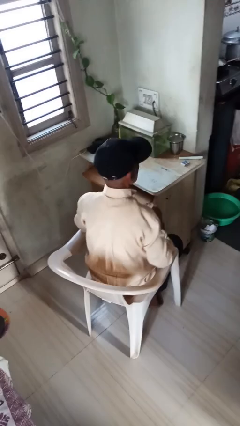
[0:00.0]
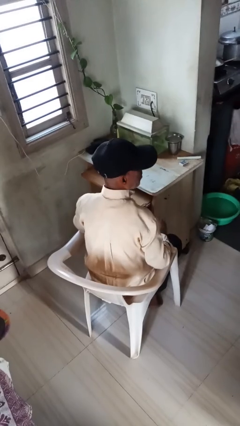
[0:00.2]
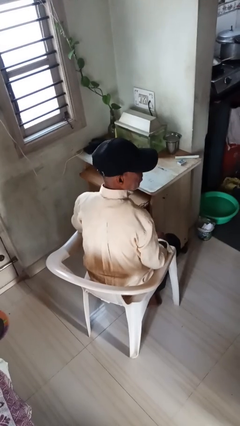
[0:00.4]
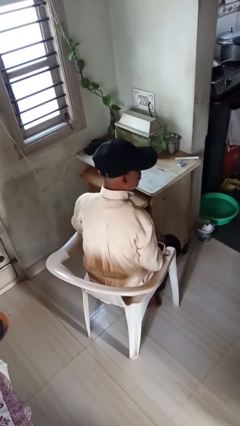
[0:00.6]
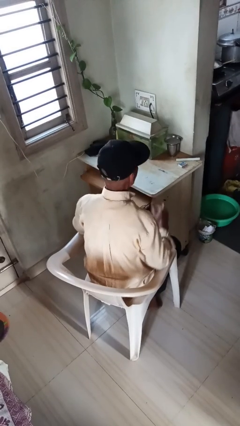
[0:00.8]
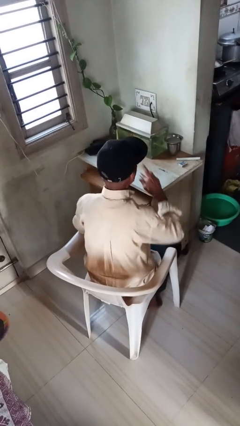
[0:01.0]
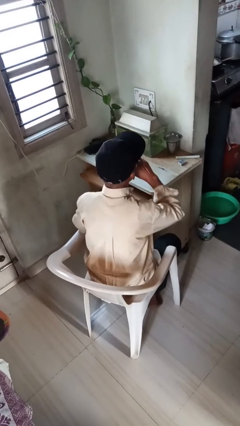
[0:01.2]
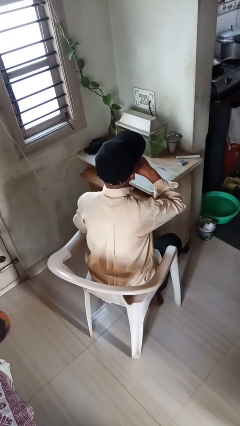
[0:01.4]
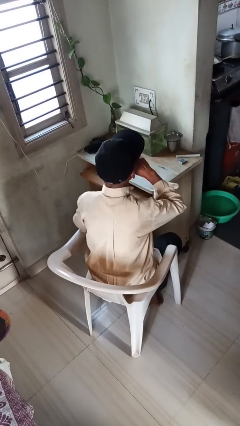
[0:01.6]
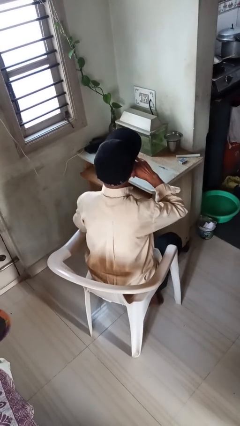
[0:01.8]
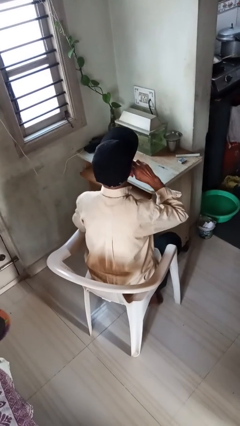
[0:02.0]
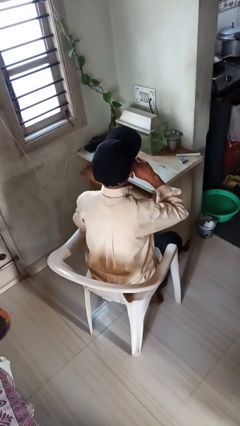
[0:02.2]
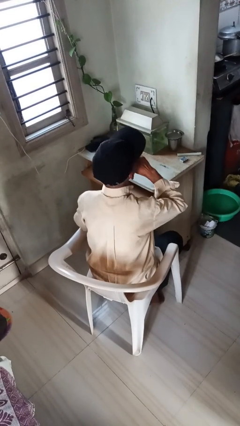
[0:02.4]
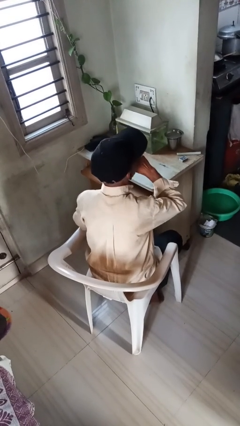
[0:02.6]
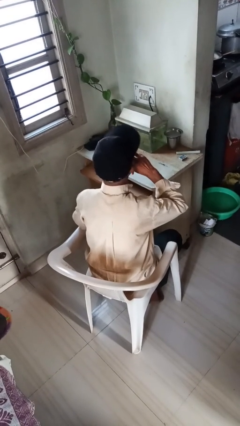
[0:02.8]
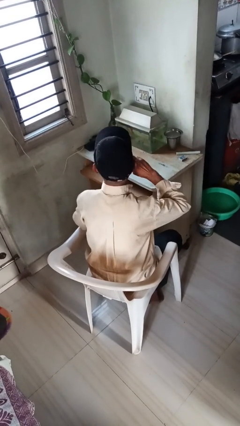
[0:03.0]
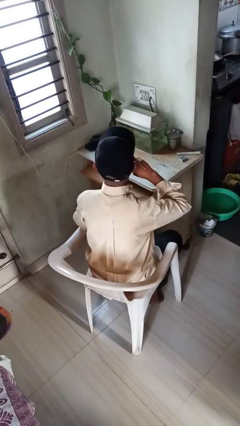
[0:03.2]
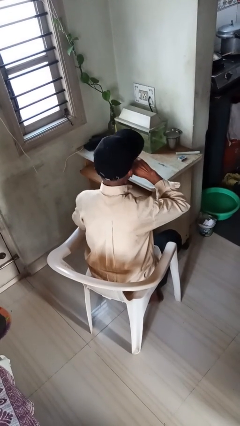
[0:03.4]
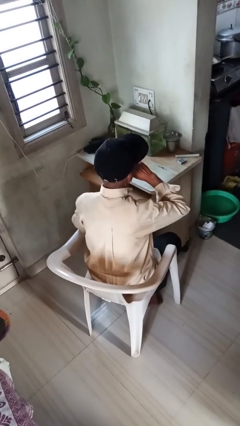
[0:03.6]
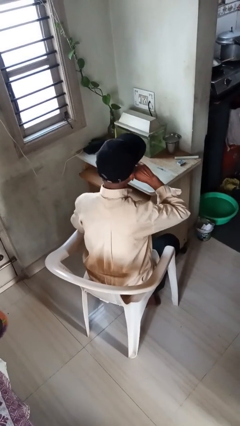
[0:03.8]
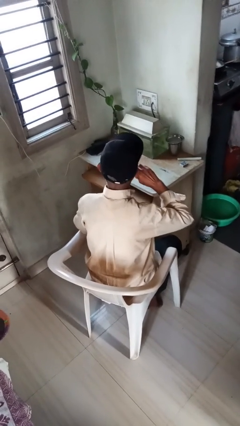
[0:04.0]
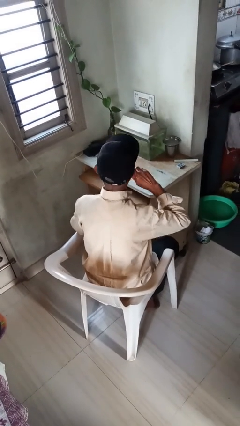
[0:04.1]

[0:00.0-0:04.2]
person licks fingers

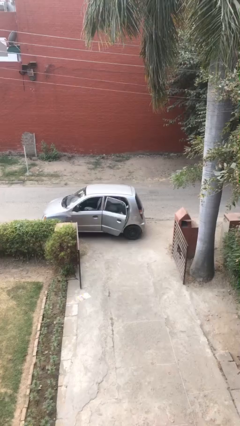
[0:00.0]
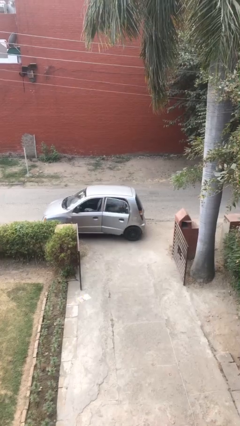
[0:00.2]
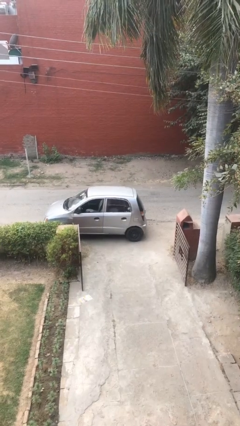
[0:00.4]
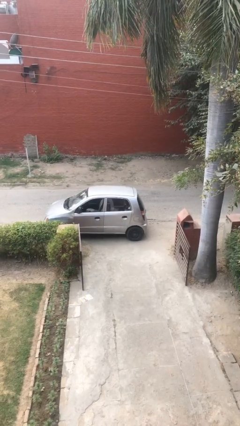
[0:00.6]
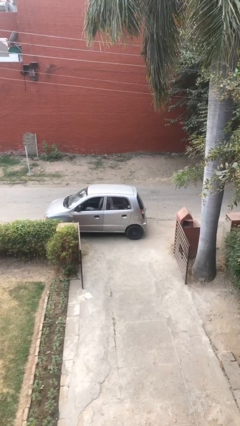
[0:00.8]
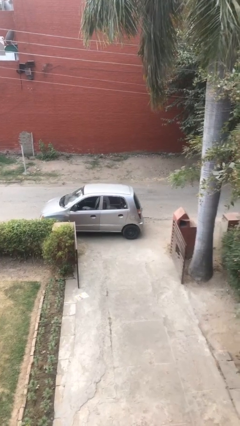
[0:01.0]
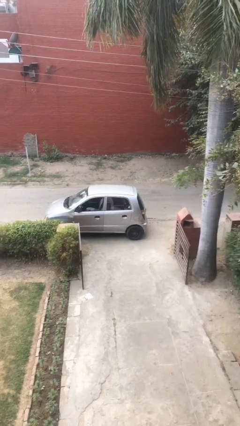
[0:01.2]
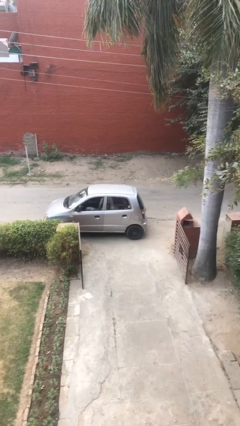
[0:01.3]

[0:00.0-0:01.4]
person closes car door

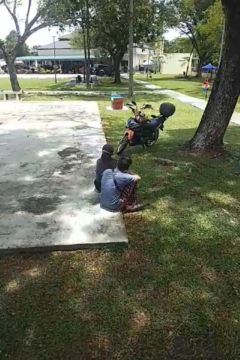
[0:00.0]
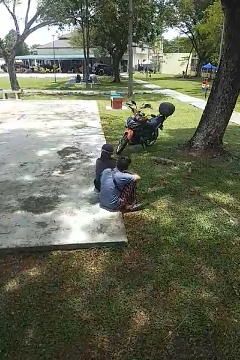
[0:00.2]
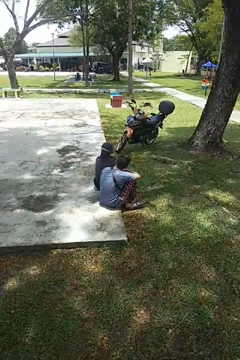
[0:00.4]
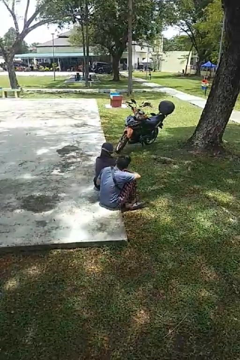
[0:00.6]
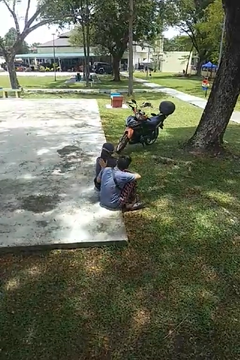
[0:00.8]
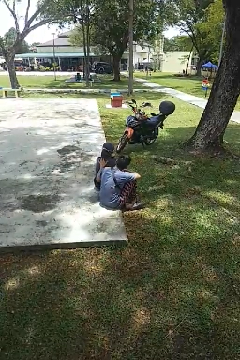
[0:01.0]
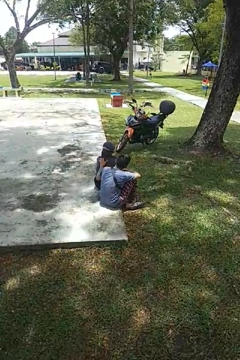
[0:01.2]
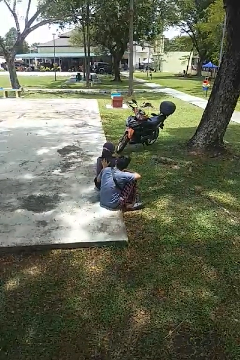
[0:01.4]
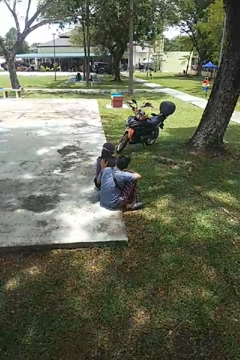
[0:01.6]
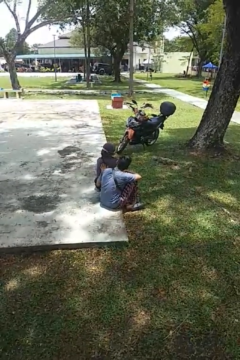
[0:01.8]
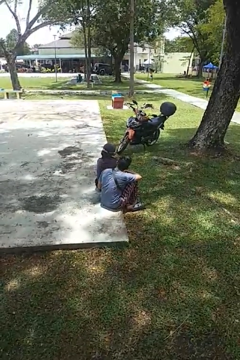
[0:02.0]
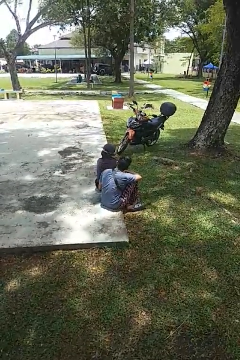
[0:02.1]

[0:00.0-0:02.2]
person touches back of person

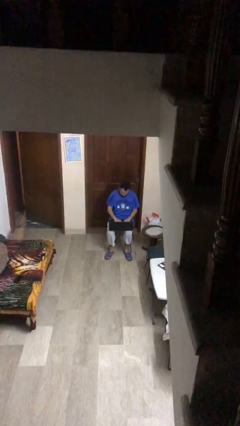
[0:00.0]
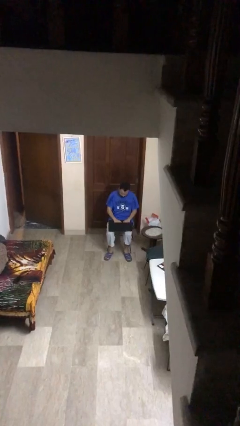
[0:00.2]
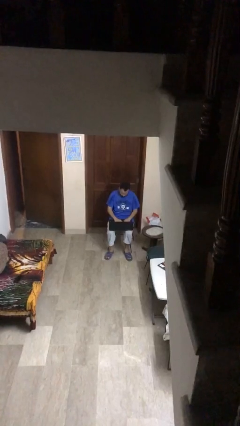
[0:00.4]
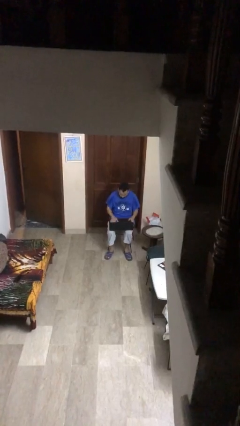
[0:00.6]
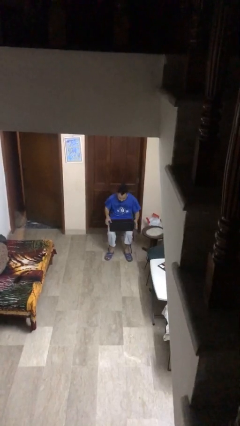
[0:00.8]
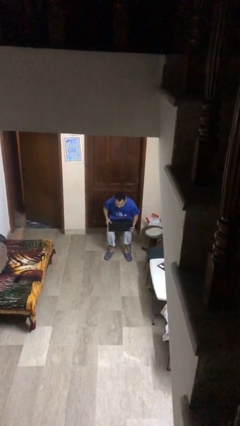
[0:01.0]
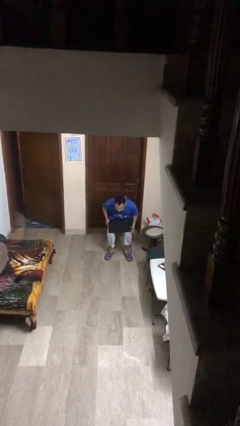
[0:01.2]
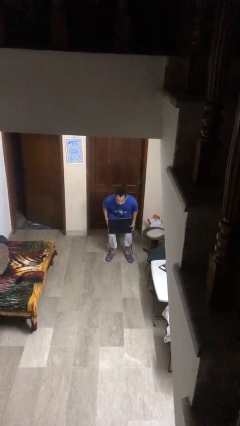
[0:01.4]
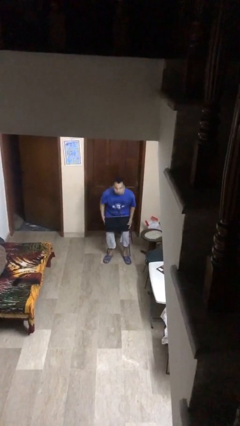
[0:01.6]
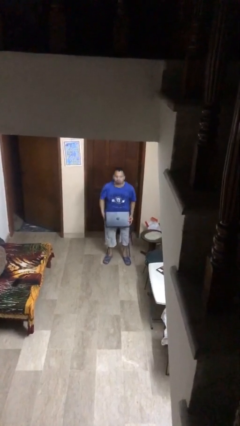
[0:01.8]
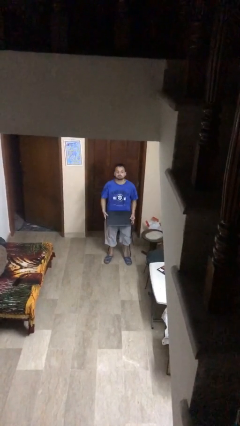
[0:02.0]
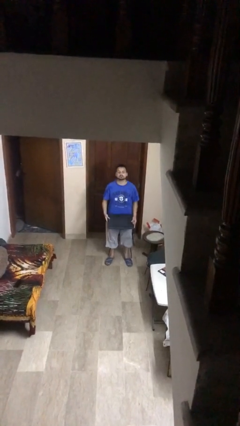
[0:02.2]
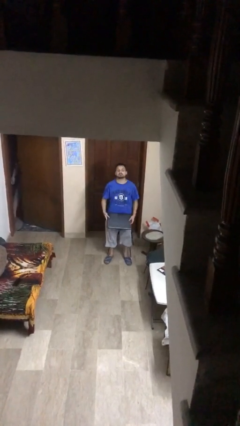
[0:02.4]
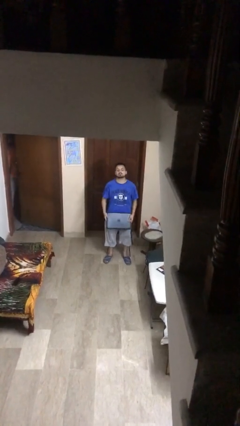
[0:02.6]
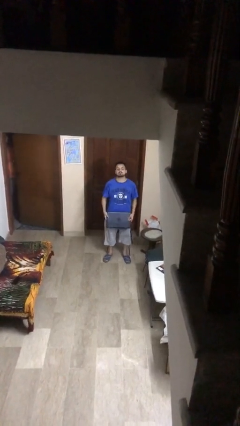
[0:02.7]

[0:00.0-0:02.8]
person stands up

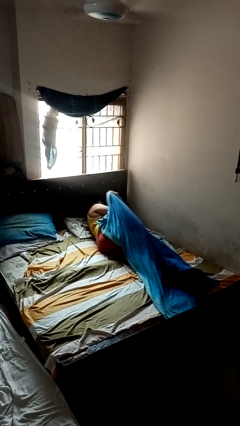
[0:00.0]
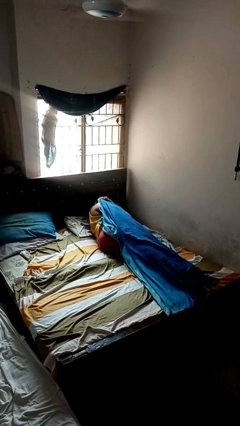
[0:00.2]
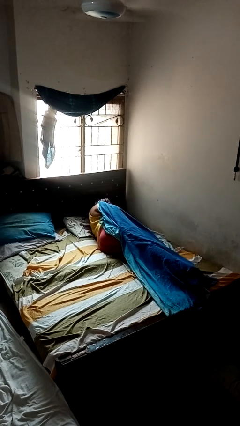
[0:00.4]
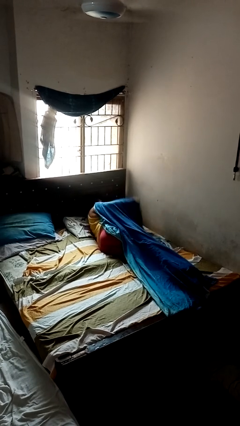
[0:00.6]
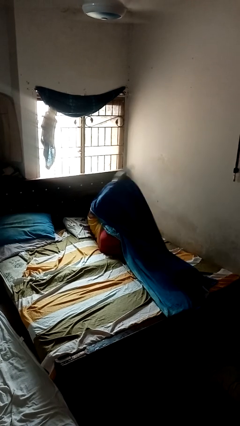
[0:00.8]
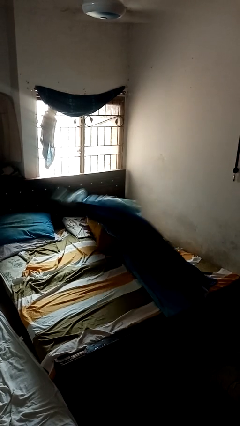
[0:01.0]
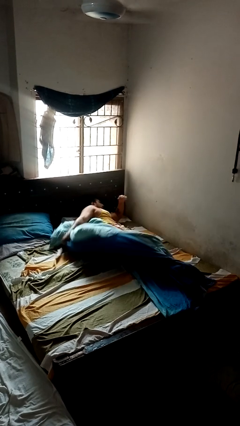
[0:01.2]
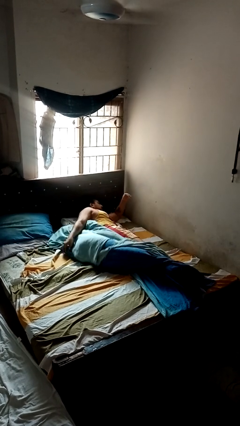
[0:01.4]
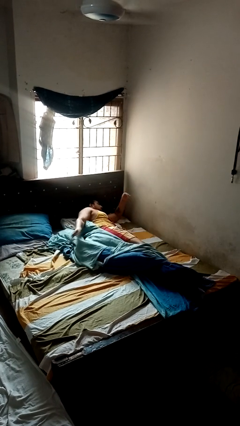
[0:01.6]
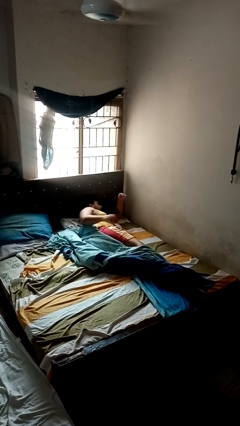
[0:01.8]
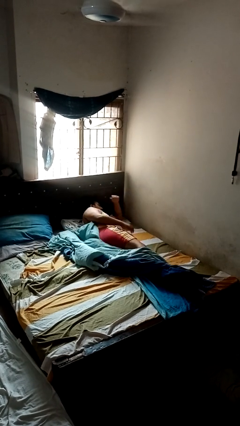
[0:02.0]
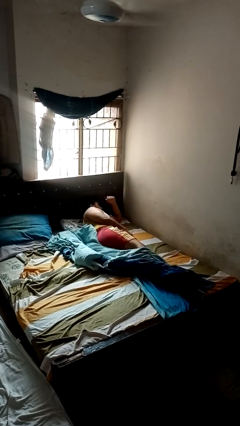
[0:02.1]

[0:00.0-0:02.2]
person uncovers with blanket

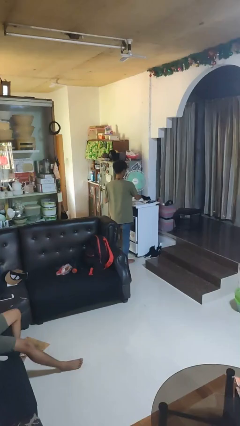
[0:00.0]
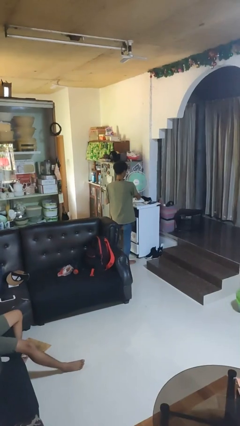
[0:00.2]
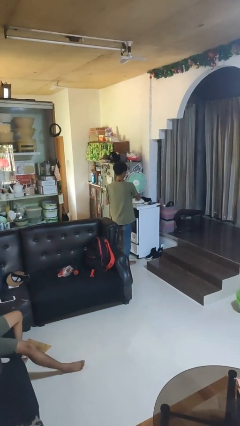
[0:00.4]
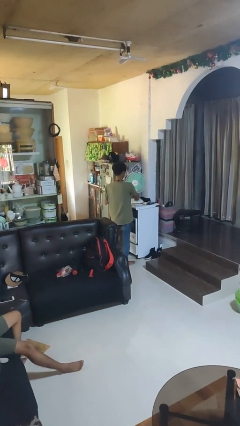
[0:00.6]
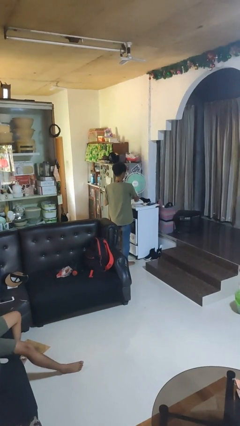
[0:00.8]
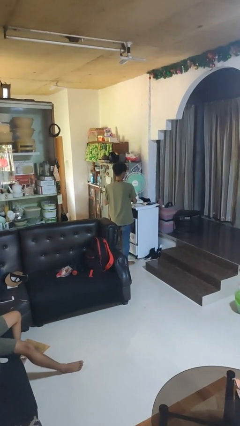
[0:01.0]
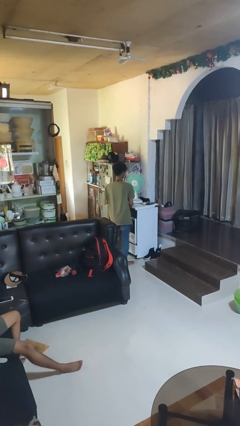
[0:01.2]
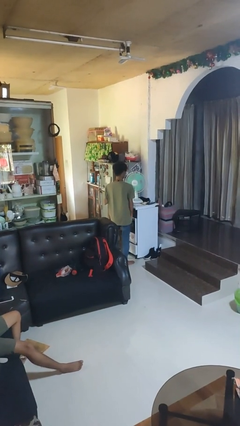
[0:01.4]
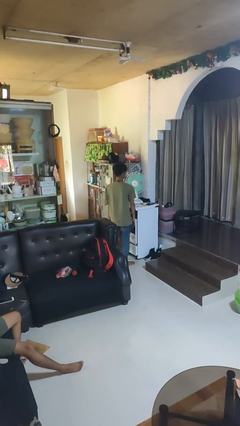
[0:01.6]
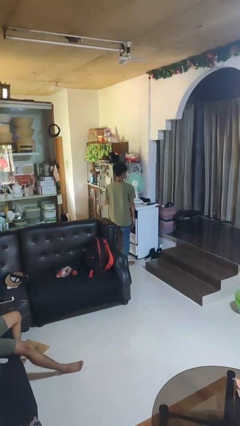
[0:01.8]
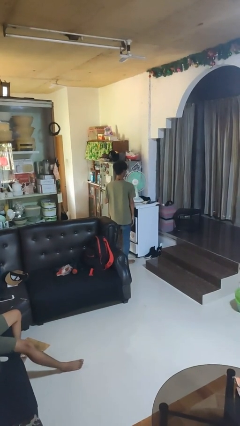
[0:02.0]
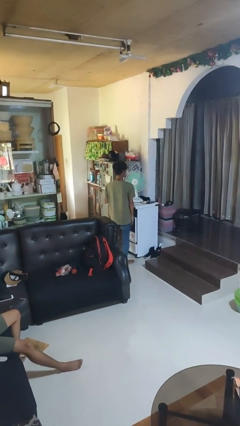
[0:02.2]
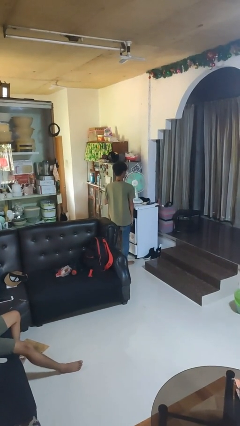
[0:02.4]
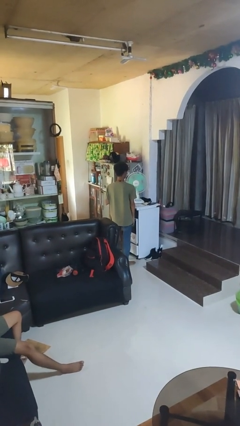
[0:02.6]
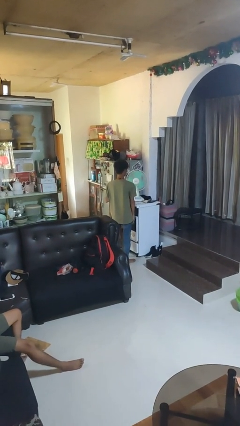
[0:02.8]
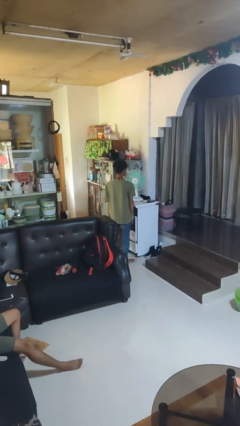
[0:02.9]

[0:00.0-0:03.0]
person turns off fan

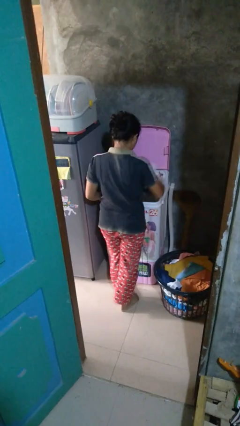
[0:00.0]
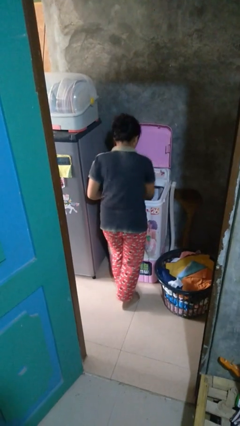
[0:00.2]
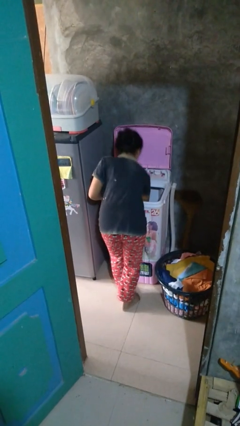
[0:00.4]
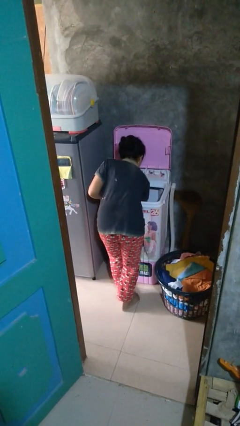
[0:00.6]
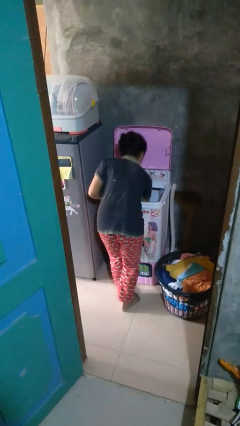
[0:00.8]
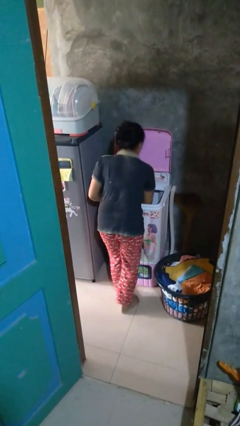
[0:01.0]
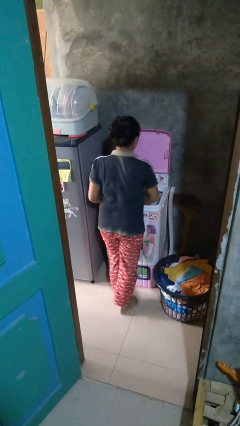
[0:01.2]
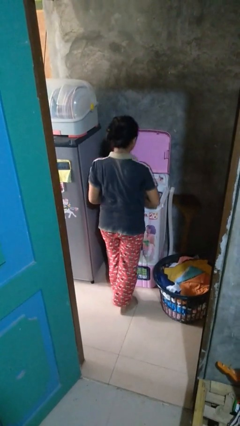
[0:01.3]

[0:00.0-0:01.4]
person loads clotheswasher

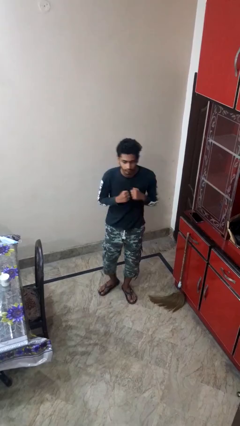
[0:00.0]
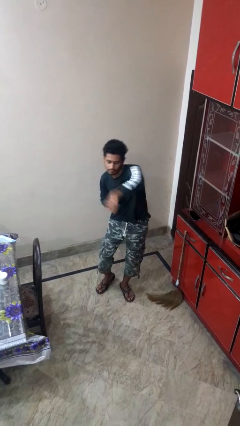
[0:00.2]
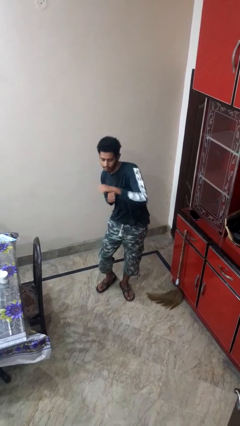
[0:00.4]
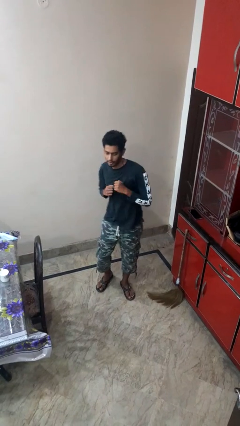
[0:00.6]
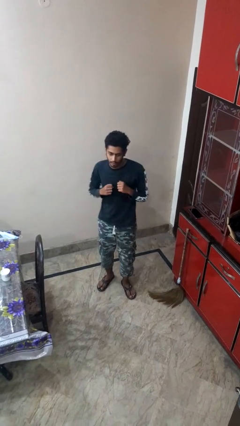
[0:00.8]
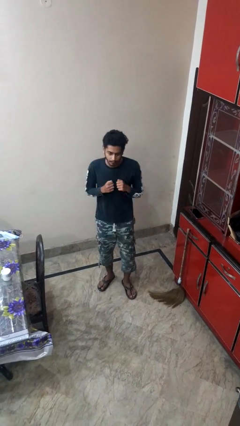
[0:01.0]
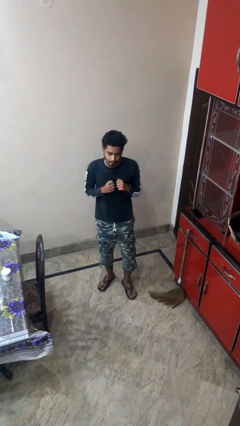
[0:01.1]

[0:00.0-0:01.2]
person punches
